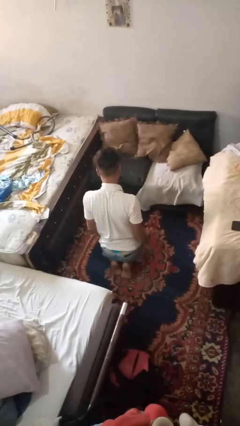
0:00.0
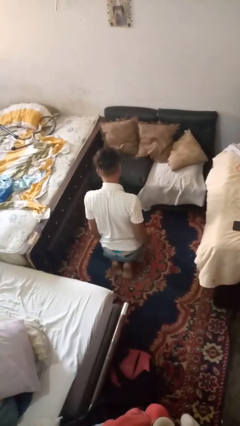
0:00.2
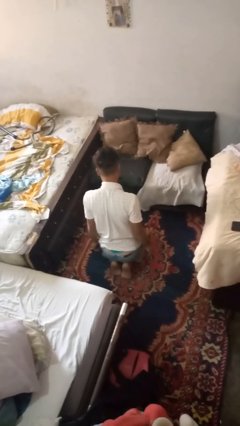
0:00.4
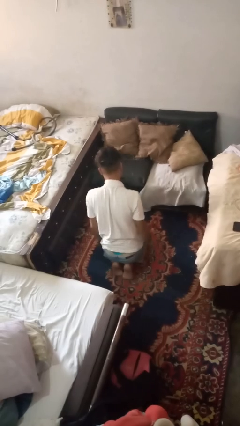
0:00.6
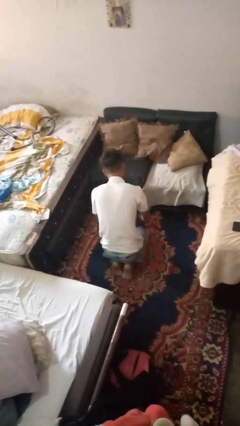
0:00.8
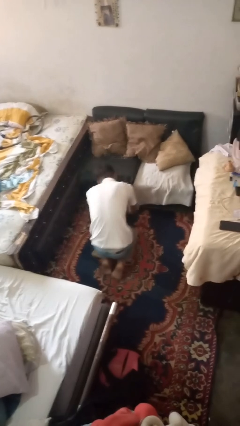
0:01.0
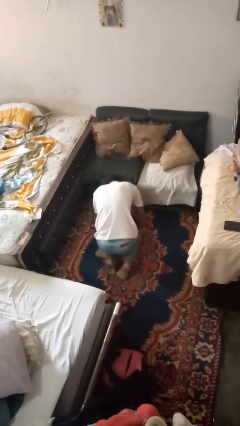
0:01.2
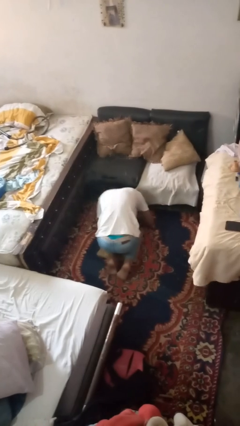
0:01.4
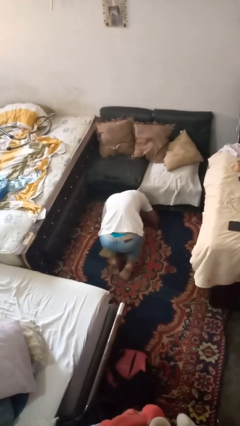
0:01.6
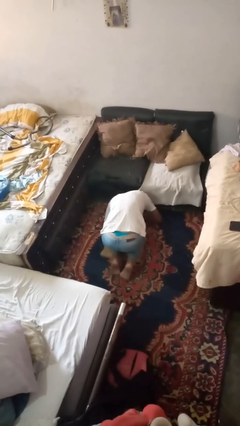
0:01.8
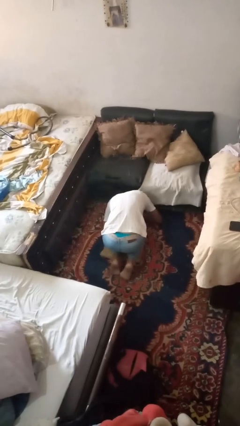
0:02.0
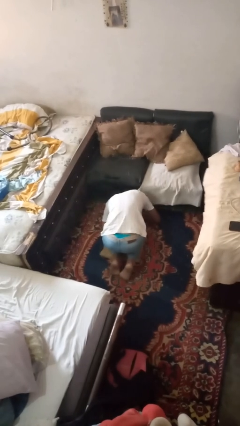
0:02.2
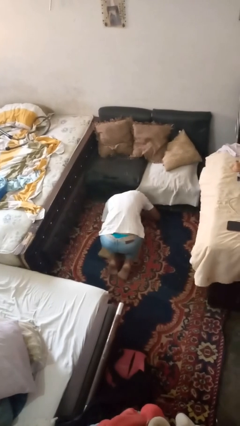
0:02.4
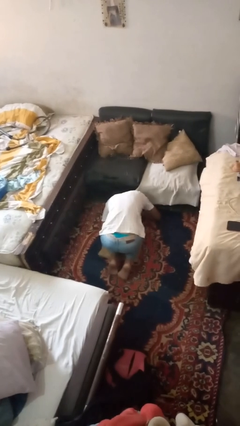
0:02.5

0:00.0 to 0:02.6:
person searches under couch

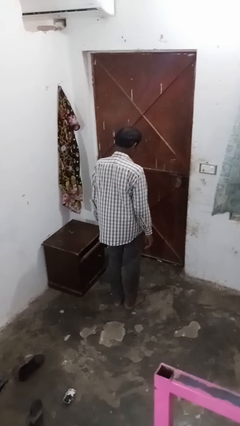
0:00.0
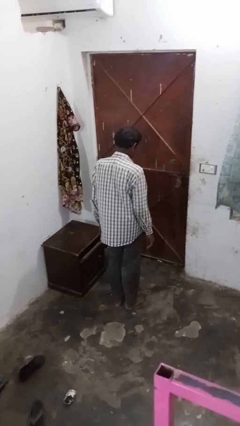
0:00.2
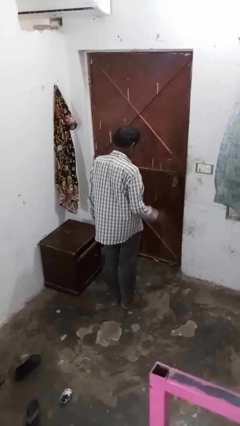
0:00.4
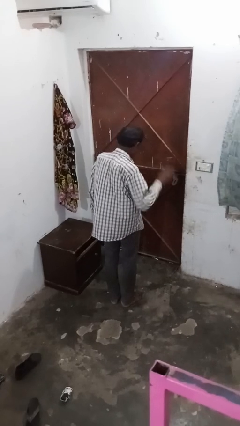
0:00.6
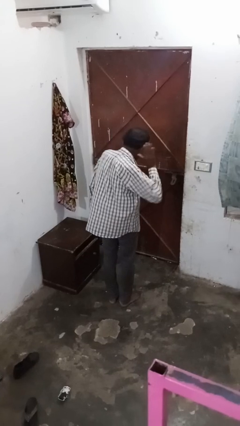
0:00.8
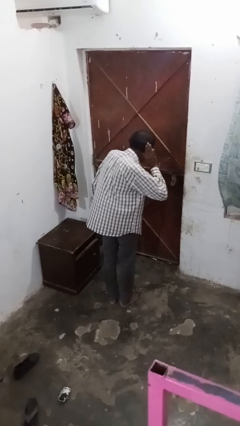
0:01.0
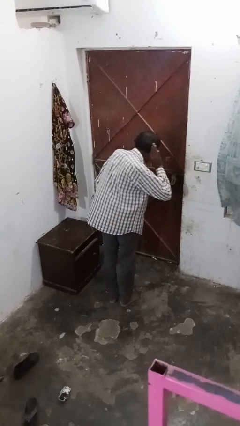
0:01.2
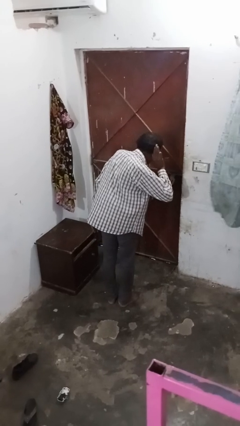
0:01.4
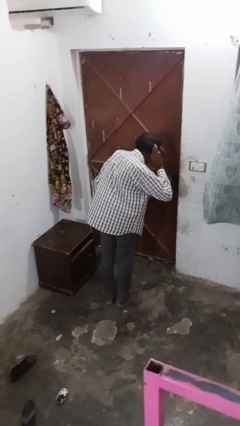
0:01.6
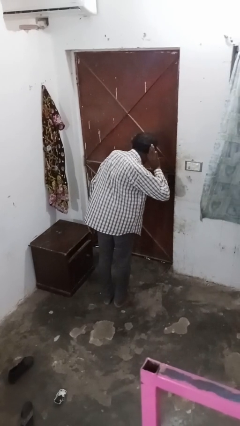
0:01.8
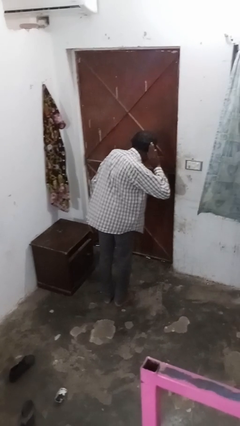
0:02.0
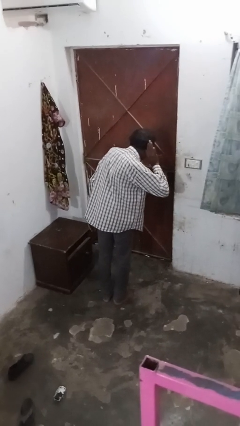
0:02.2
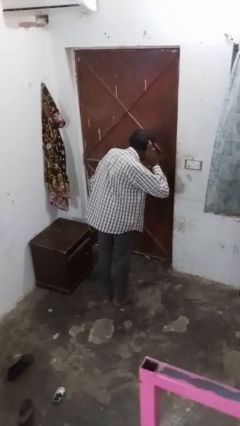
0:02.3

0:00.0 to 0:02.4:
person gestures listen closely

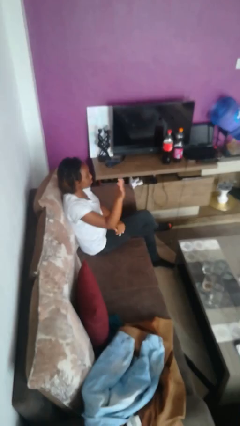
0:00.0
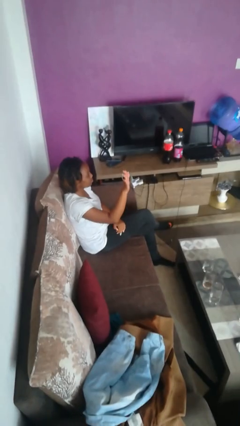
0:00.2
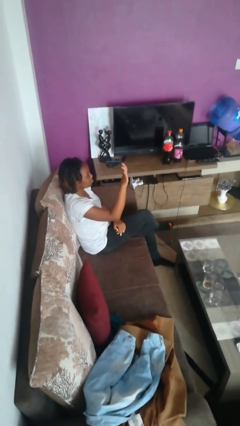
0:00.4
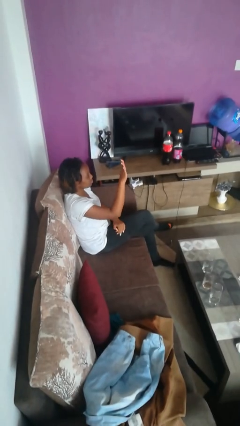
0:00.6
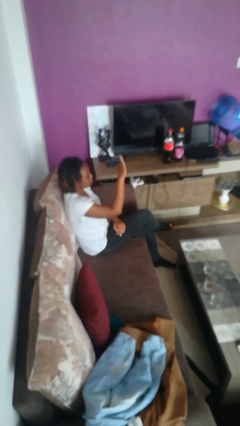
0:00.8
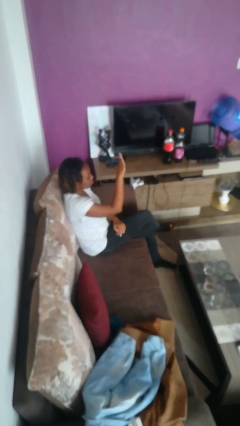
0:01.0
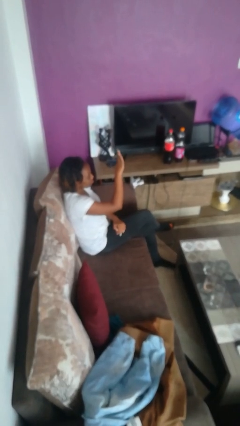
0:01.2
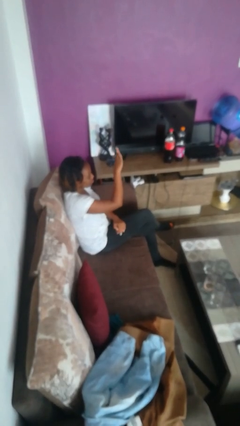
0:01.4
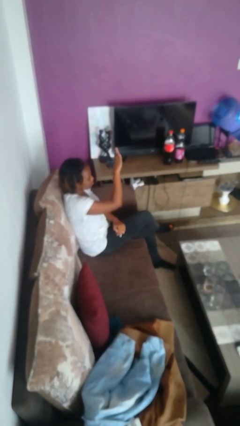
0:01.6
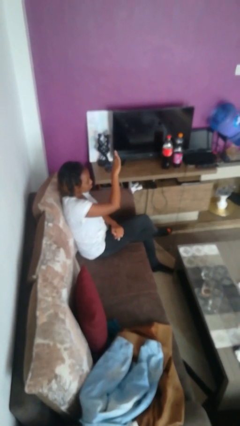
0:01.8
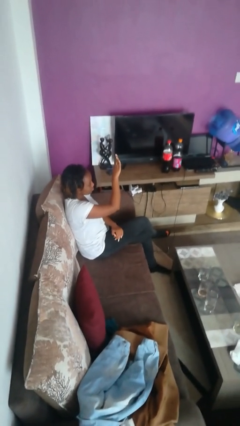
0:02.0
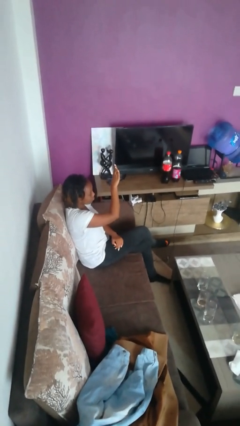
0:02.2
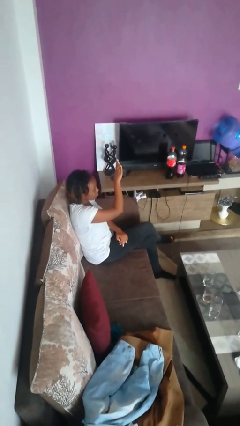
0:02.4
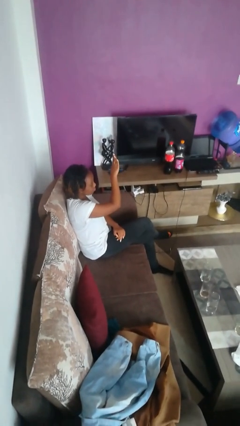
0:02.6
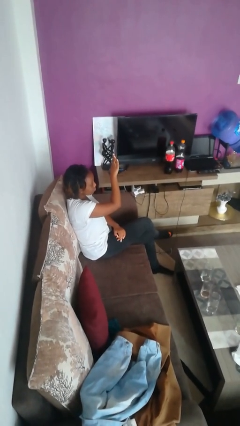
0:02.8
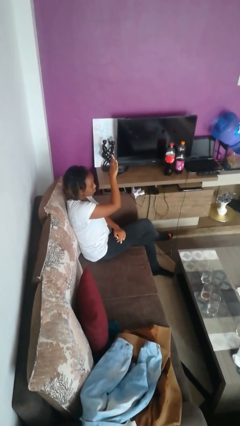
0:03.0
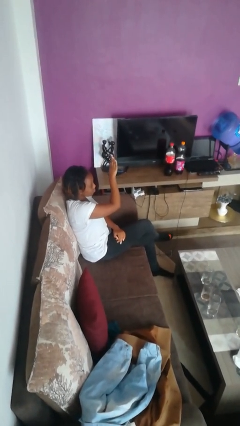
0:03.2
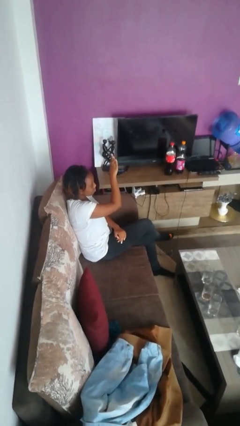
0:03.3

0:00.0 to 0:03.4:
person gestures swipe left

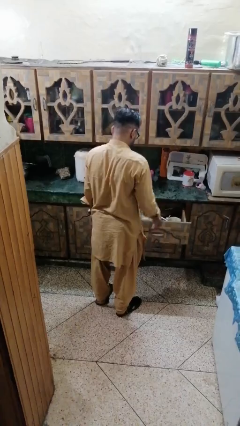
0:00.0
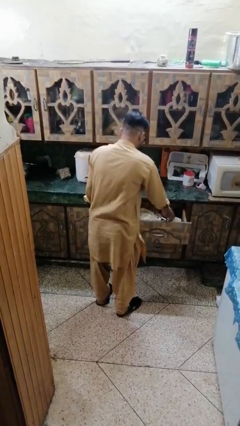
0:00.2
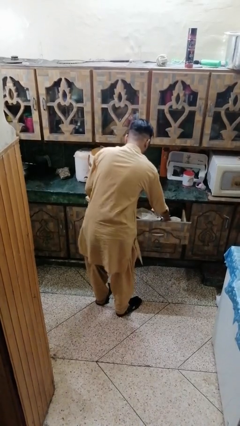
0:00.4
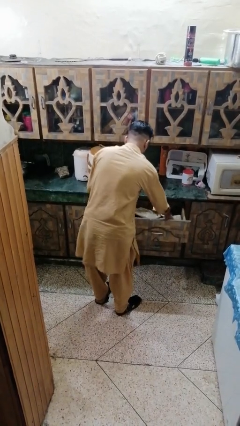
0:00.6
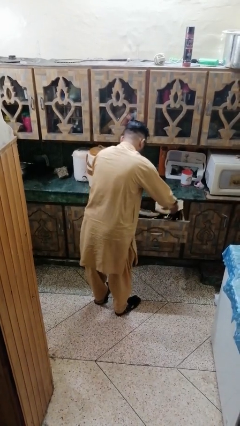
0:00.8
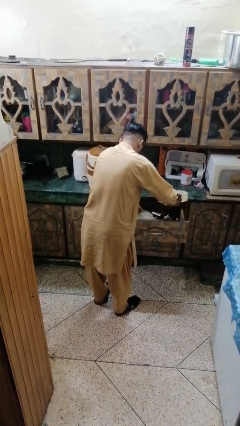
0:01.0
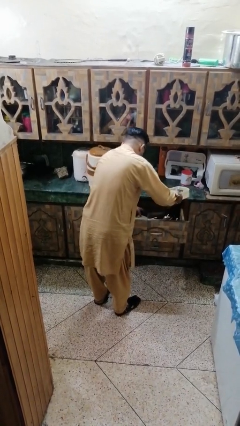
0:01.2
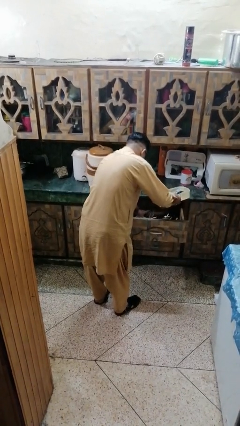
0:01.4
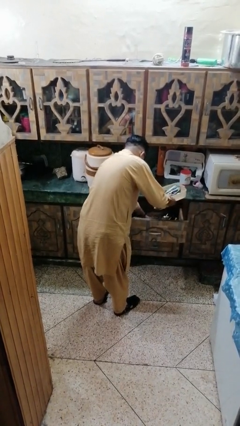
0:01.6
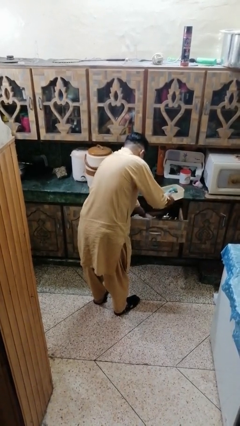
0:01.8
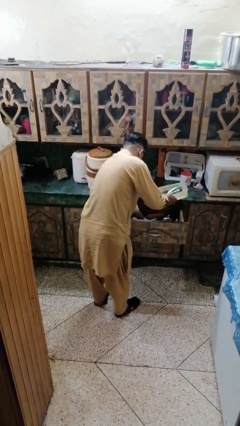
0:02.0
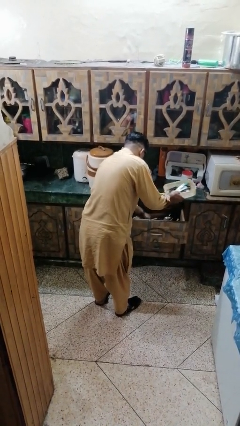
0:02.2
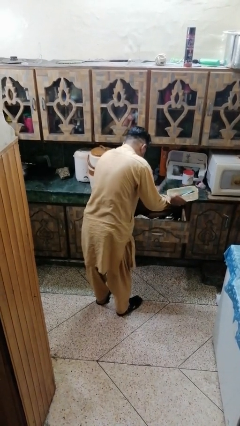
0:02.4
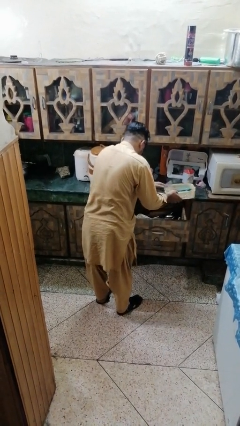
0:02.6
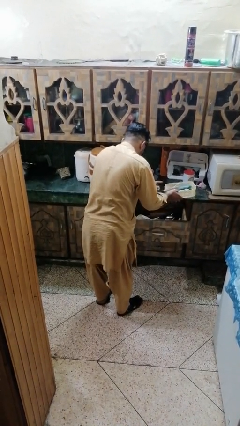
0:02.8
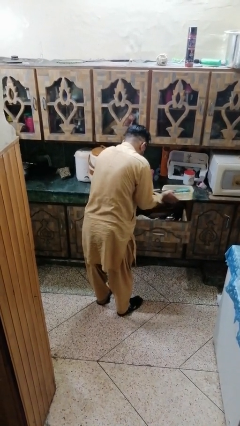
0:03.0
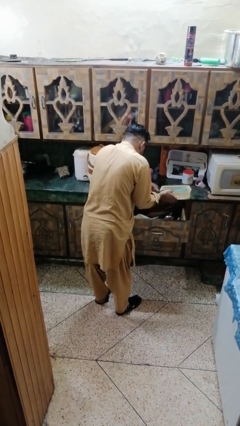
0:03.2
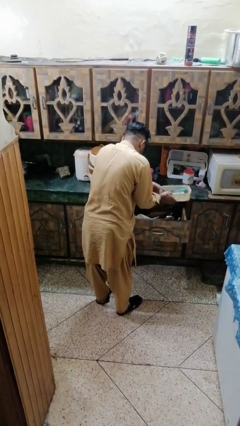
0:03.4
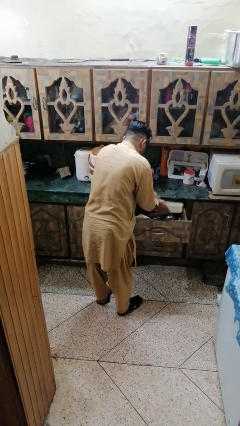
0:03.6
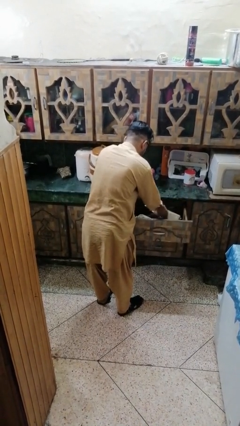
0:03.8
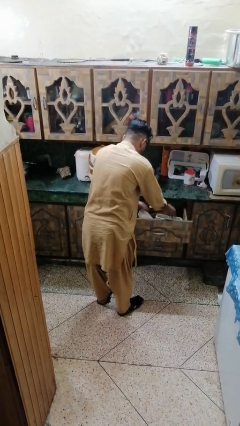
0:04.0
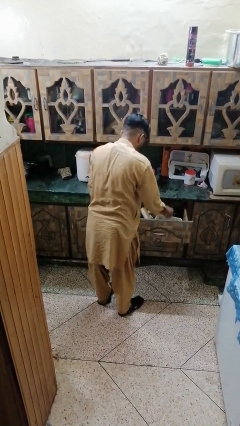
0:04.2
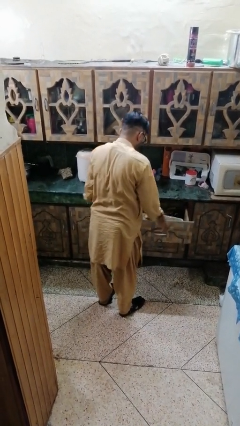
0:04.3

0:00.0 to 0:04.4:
person searches in kitchen drawer

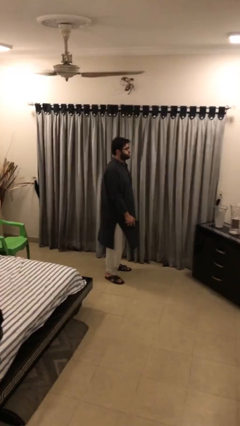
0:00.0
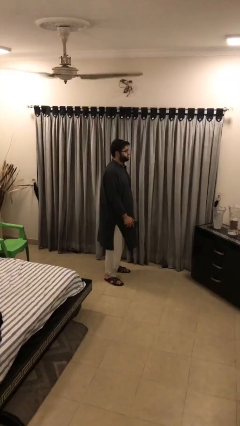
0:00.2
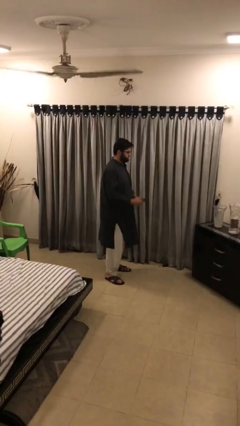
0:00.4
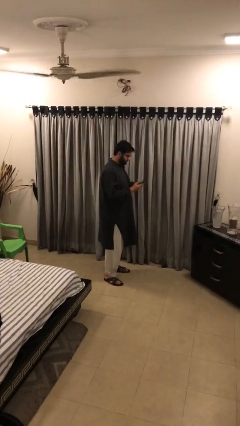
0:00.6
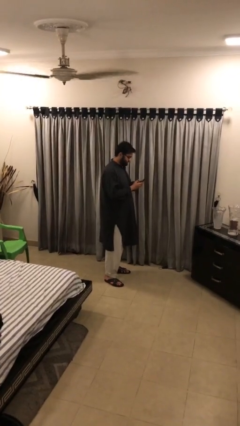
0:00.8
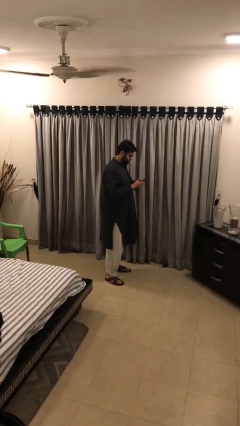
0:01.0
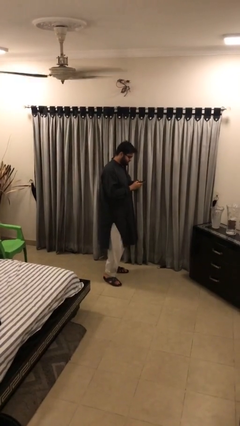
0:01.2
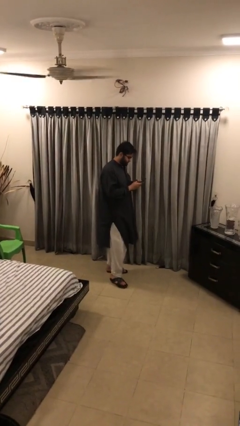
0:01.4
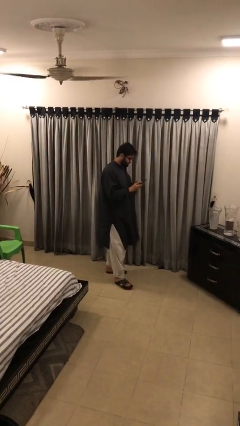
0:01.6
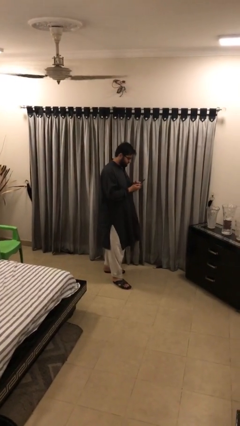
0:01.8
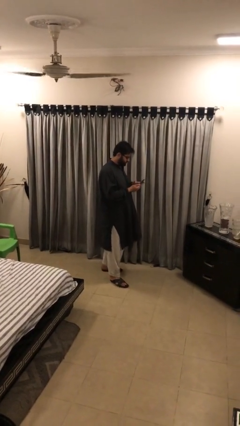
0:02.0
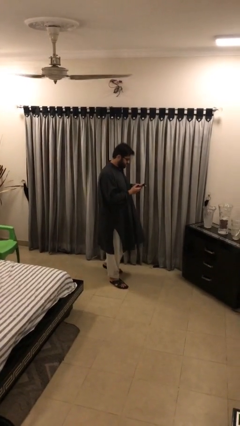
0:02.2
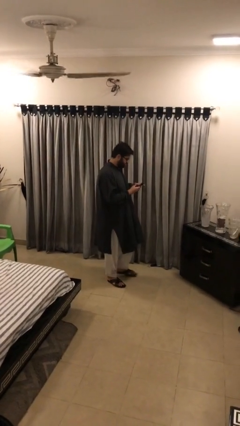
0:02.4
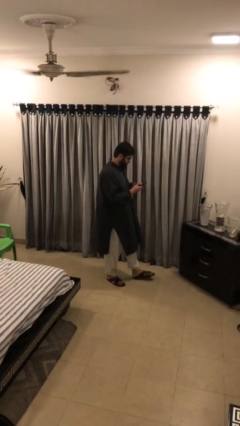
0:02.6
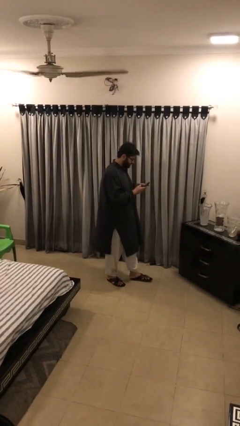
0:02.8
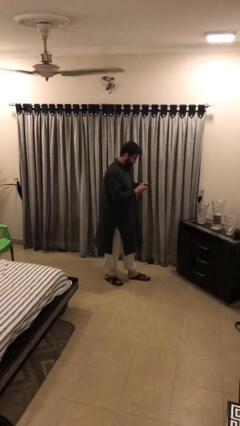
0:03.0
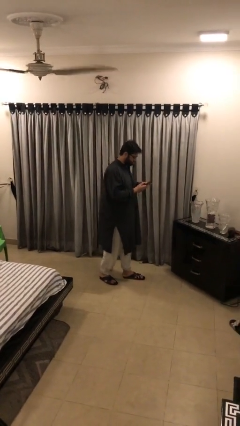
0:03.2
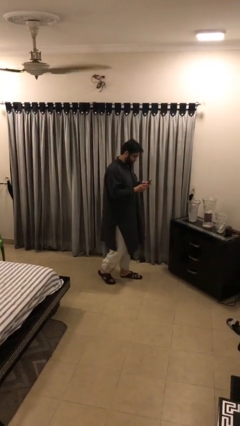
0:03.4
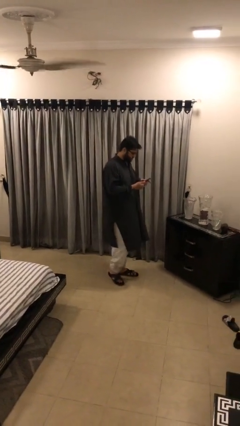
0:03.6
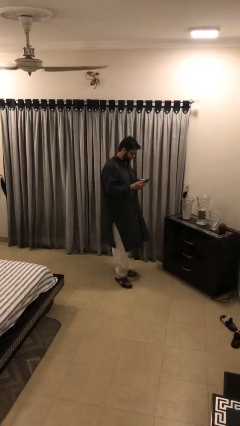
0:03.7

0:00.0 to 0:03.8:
person texts on phone

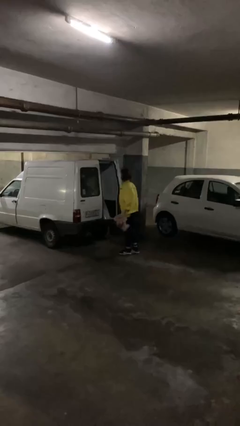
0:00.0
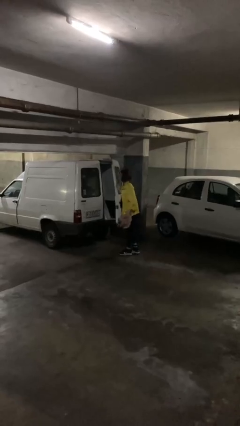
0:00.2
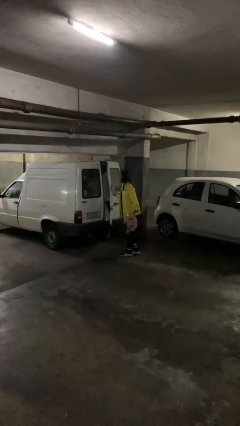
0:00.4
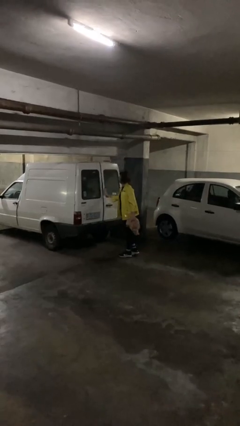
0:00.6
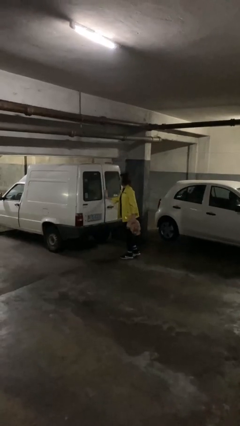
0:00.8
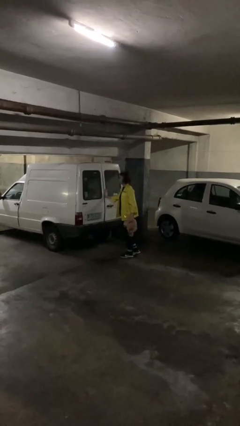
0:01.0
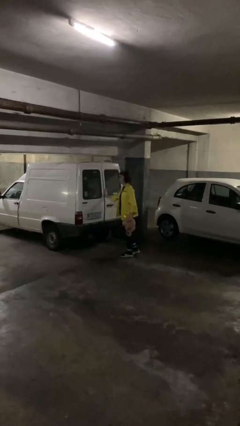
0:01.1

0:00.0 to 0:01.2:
person closes car door
